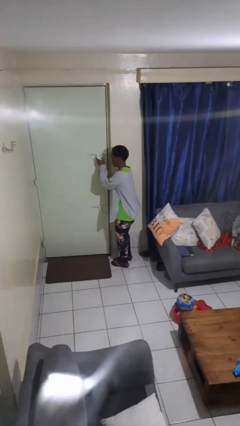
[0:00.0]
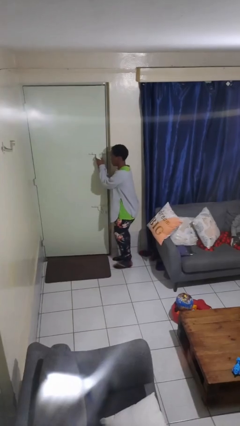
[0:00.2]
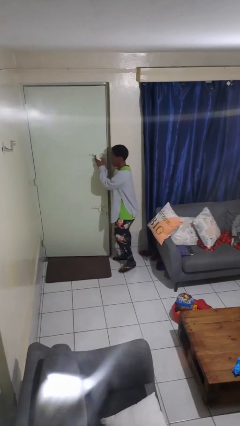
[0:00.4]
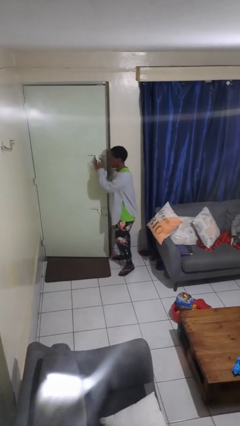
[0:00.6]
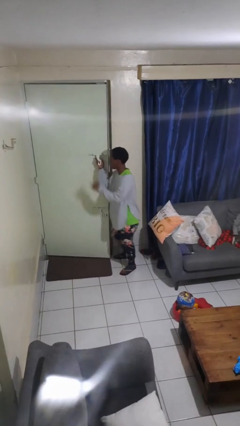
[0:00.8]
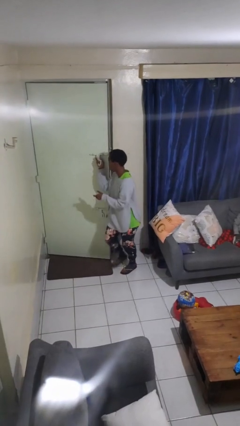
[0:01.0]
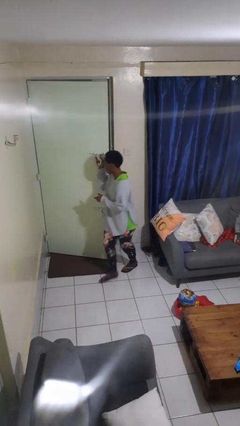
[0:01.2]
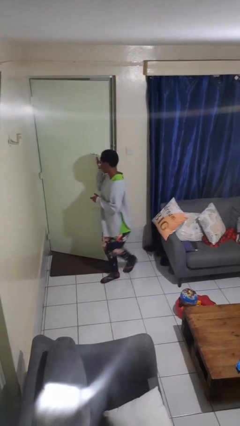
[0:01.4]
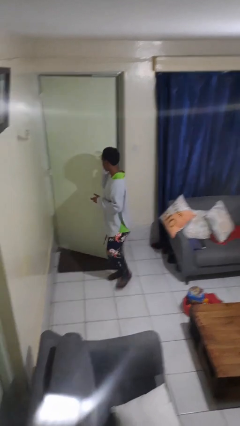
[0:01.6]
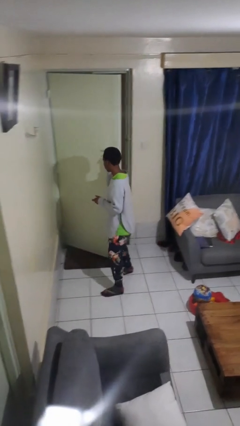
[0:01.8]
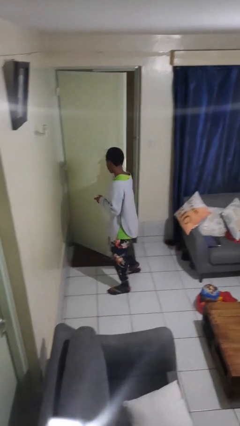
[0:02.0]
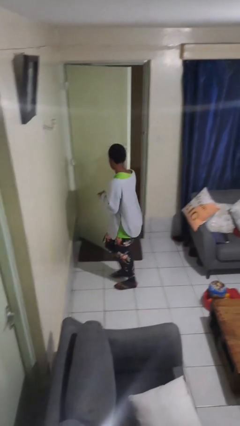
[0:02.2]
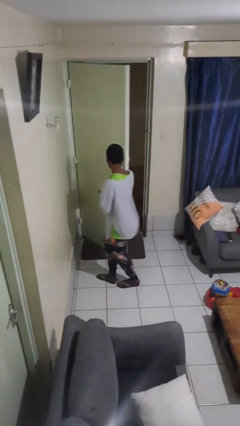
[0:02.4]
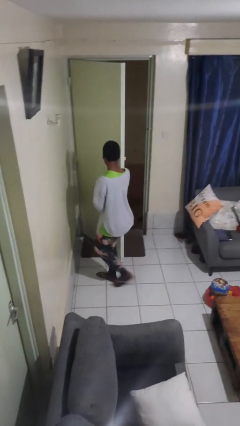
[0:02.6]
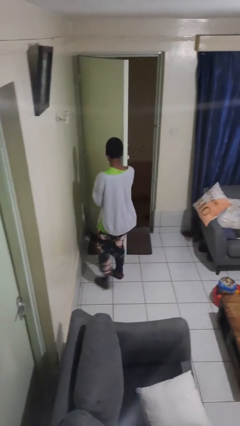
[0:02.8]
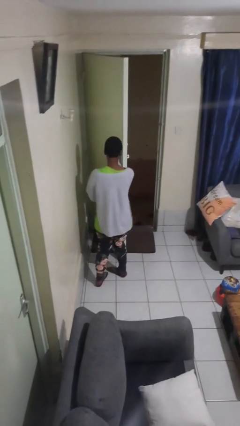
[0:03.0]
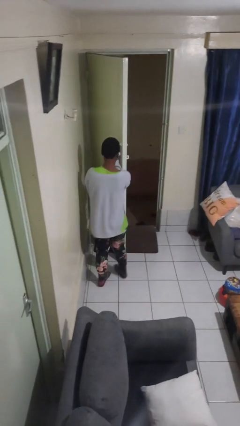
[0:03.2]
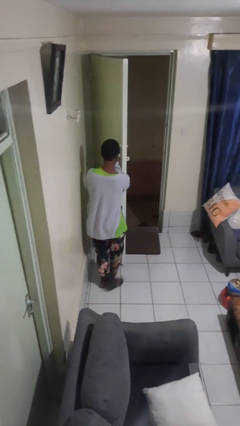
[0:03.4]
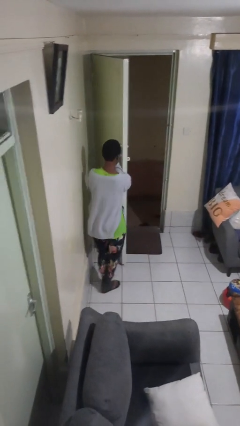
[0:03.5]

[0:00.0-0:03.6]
person opens facility door

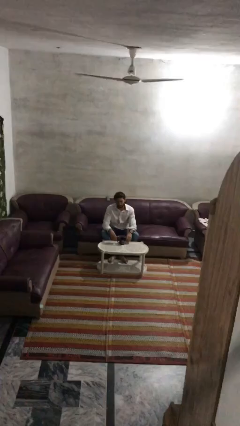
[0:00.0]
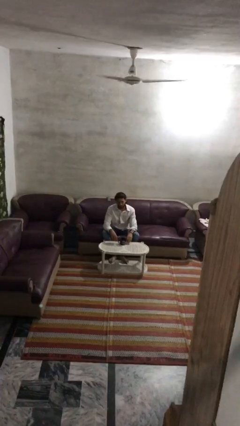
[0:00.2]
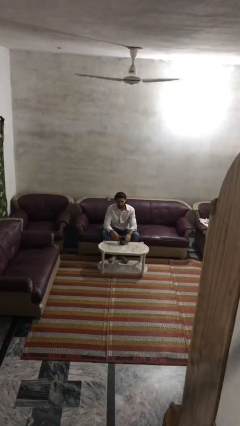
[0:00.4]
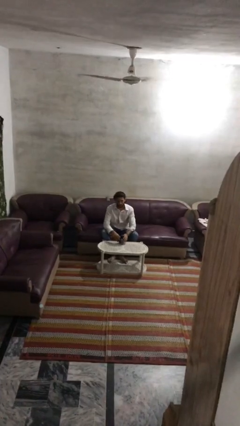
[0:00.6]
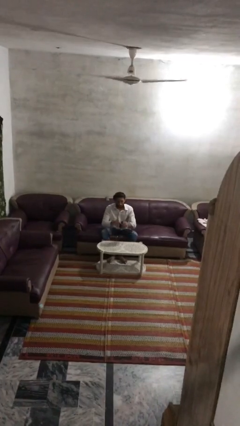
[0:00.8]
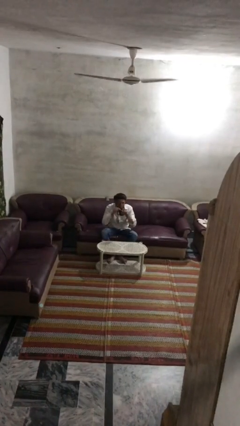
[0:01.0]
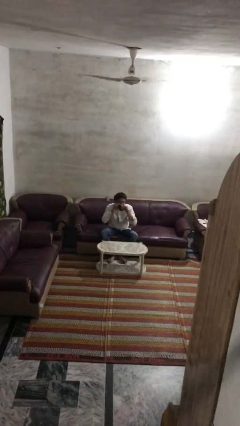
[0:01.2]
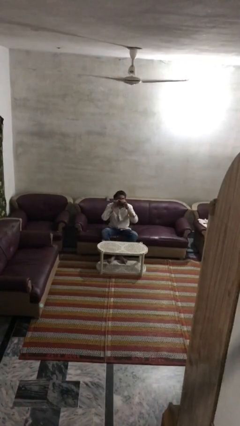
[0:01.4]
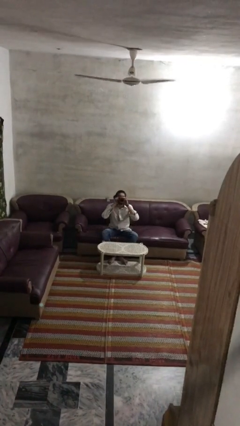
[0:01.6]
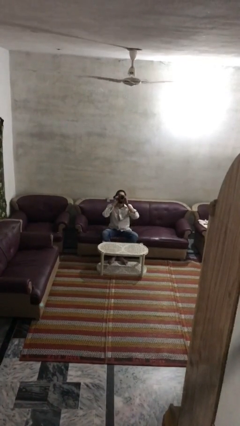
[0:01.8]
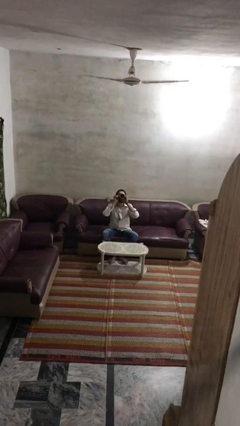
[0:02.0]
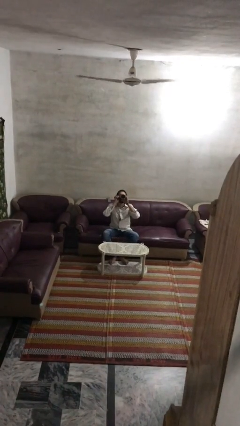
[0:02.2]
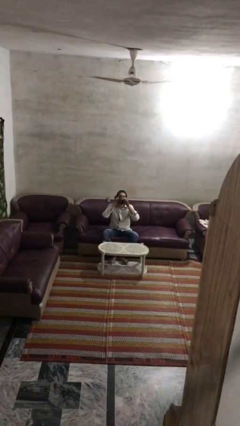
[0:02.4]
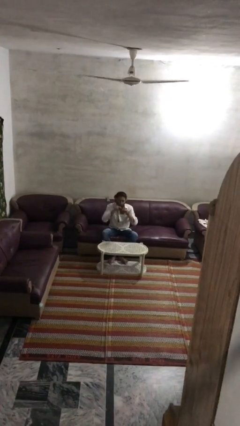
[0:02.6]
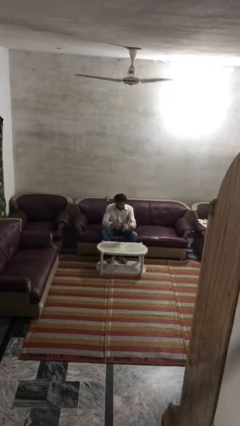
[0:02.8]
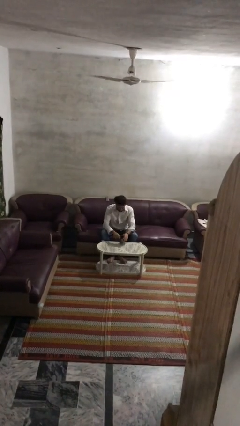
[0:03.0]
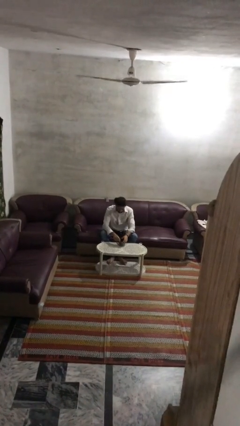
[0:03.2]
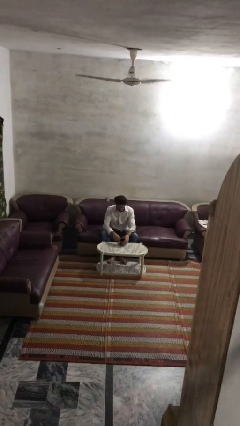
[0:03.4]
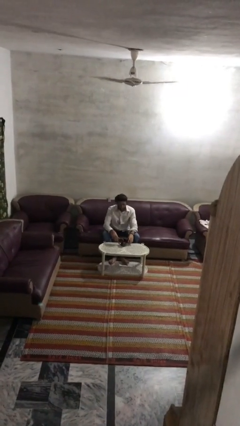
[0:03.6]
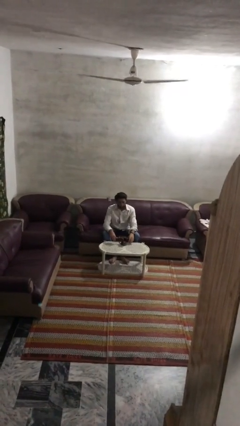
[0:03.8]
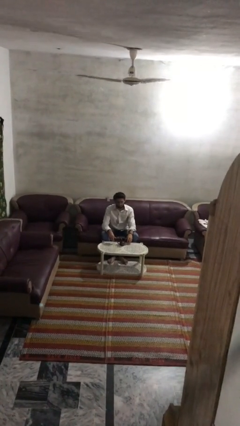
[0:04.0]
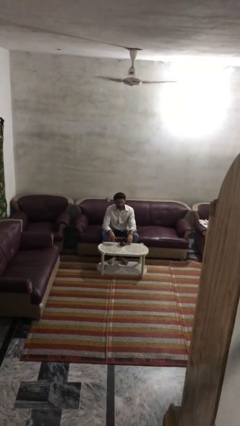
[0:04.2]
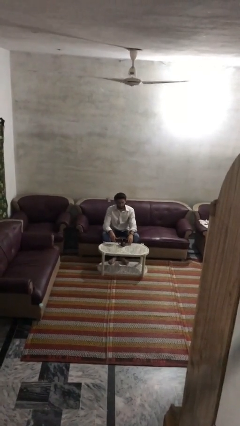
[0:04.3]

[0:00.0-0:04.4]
person drinks from mug

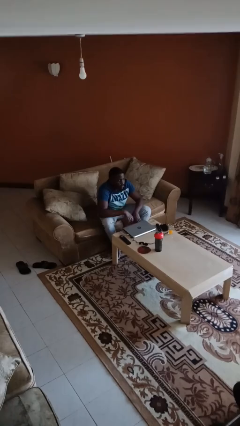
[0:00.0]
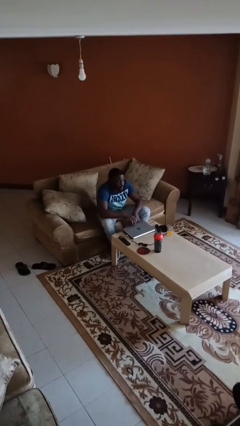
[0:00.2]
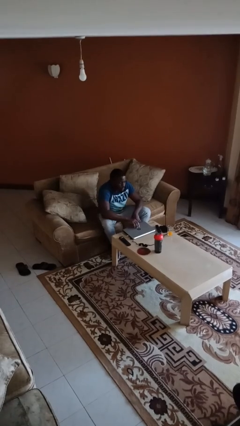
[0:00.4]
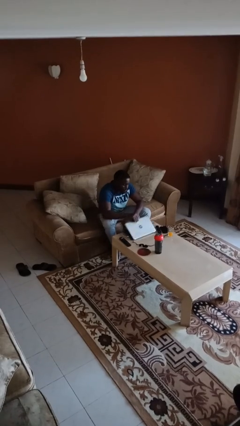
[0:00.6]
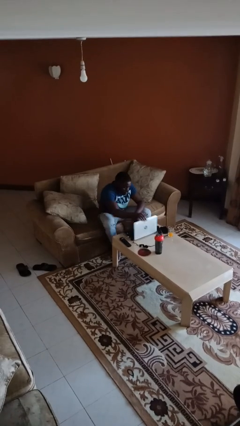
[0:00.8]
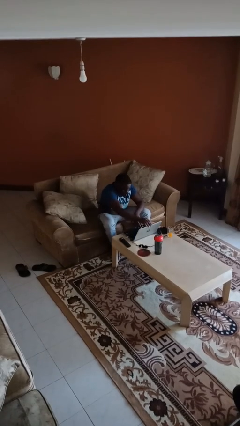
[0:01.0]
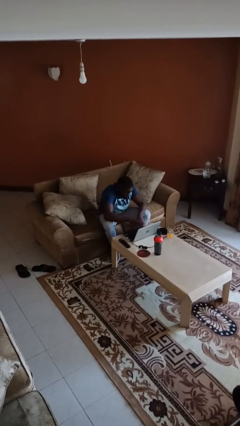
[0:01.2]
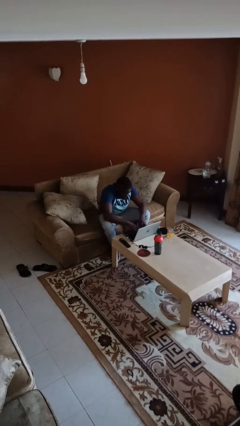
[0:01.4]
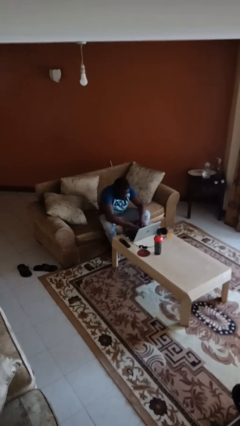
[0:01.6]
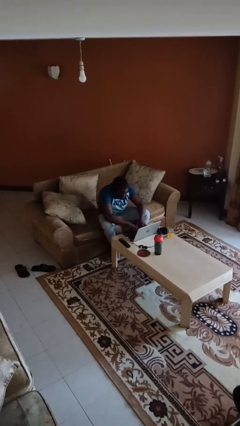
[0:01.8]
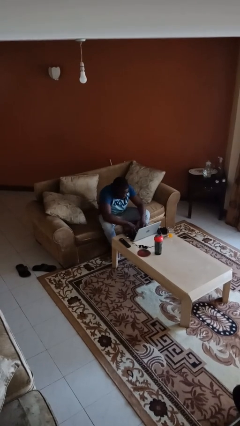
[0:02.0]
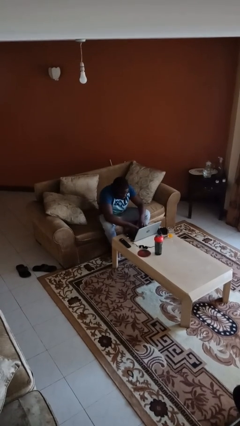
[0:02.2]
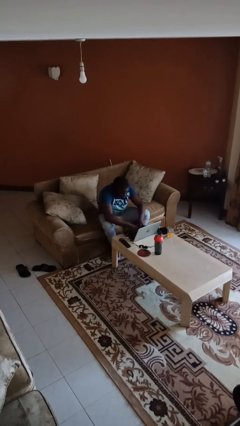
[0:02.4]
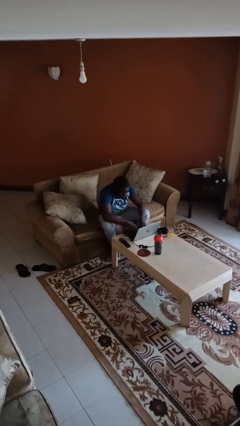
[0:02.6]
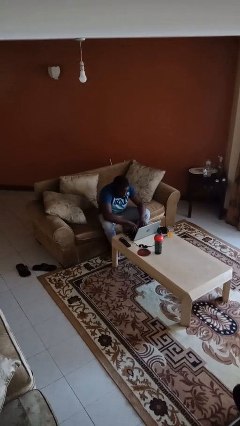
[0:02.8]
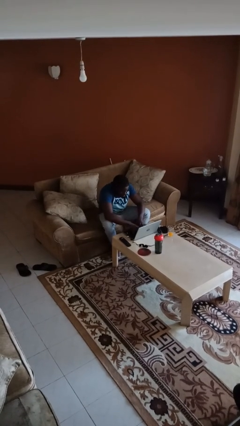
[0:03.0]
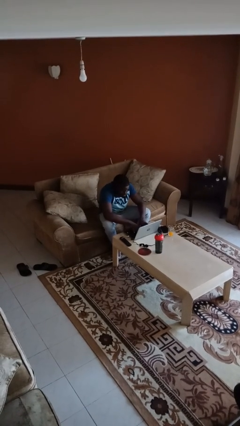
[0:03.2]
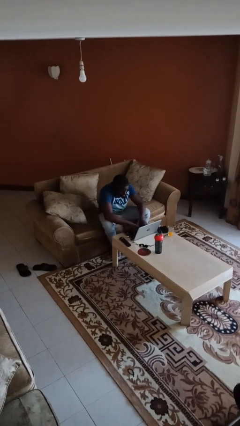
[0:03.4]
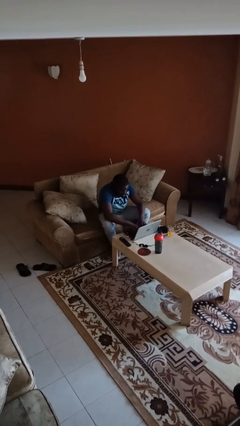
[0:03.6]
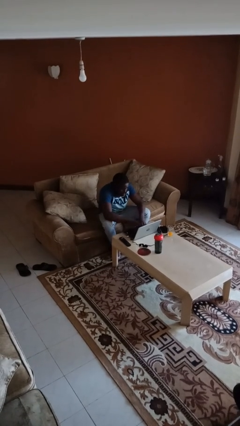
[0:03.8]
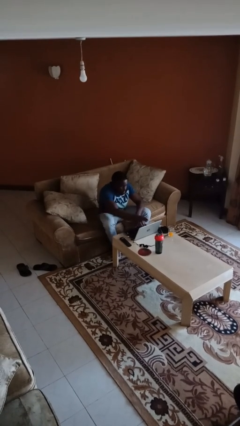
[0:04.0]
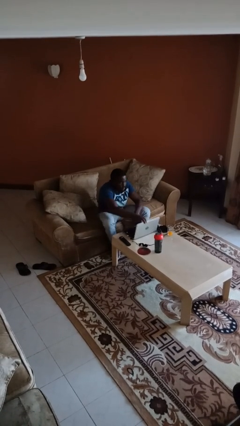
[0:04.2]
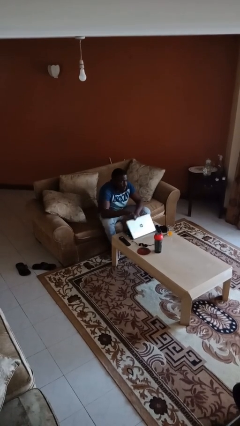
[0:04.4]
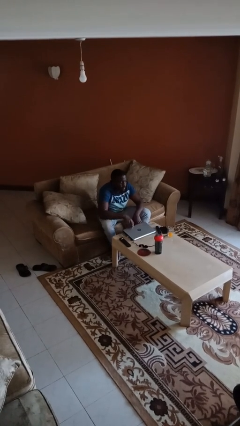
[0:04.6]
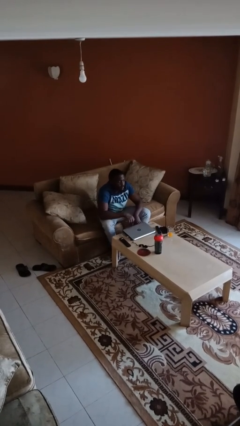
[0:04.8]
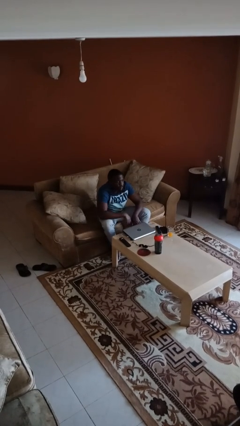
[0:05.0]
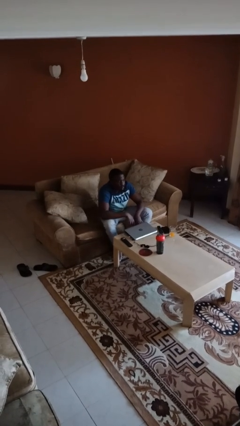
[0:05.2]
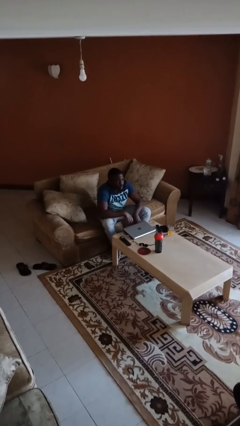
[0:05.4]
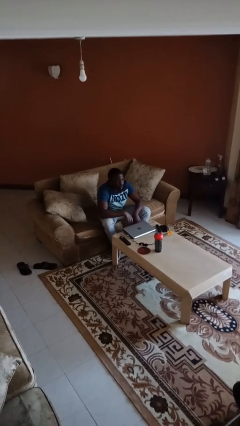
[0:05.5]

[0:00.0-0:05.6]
person interacts with laptop

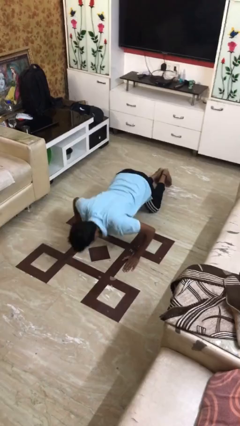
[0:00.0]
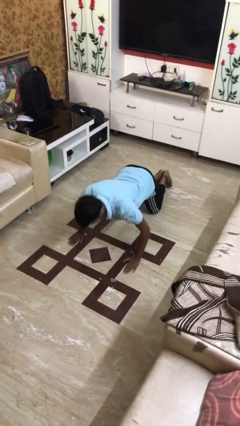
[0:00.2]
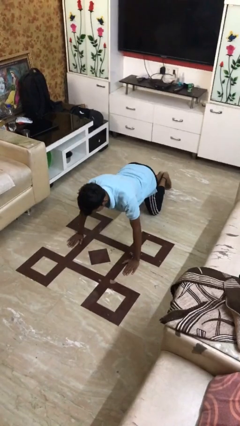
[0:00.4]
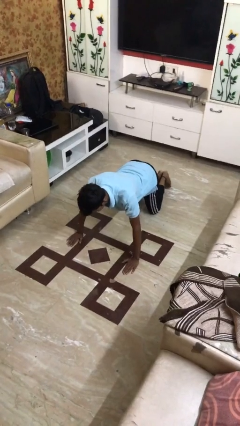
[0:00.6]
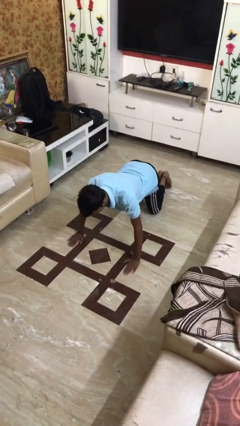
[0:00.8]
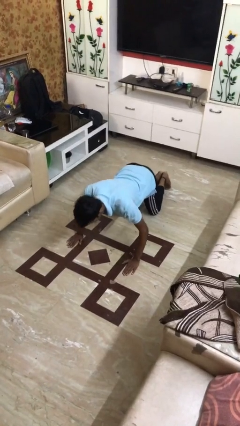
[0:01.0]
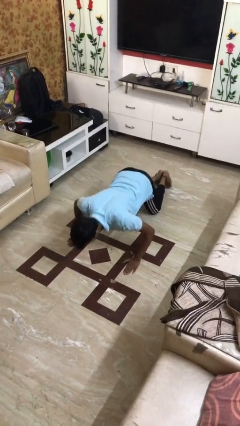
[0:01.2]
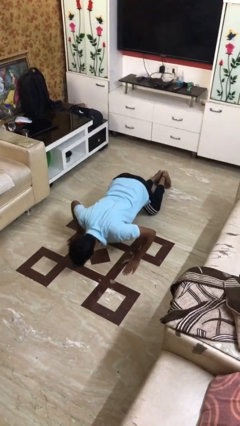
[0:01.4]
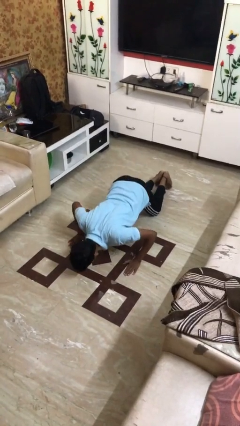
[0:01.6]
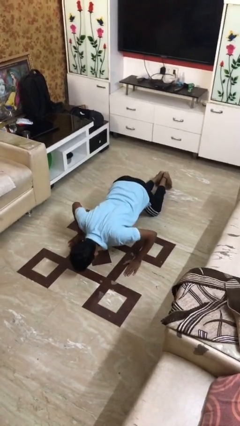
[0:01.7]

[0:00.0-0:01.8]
person exercises with pushup

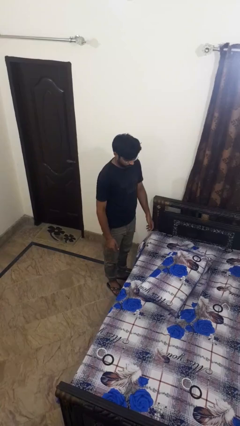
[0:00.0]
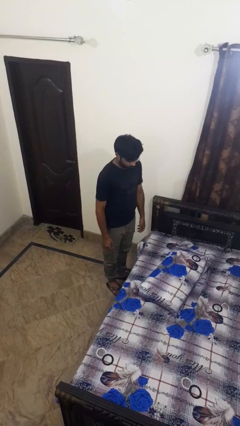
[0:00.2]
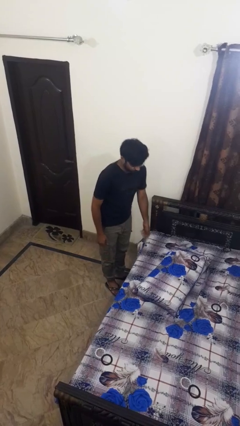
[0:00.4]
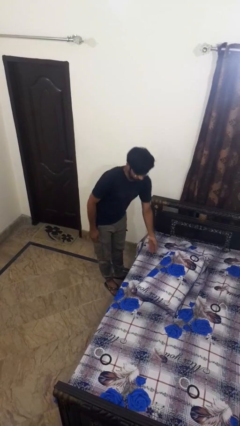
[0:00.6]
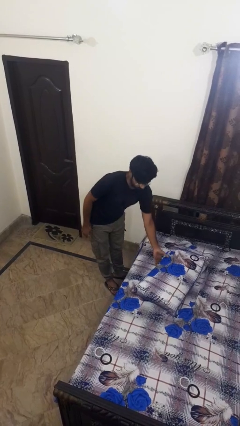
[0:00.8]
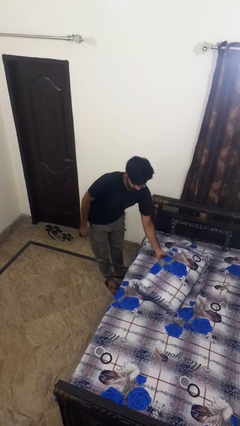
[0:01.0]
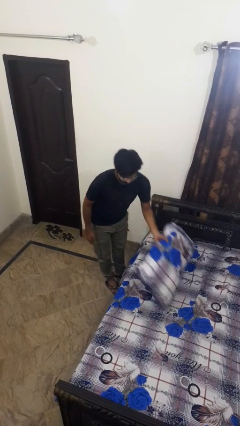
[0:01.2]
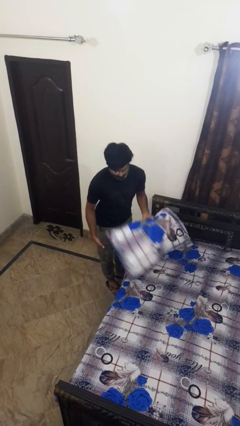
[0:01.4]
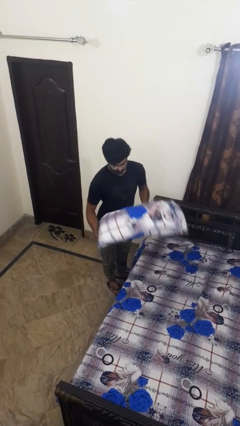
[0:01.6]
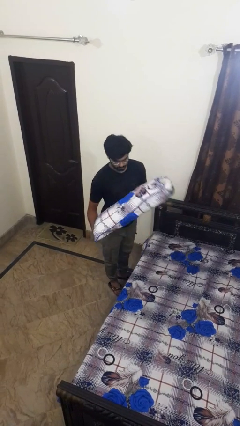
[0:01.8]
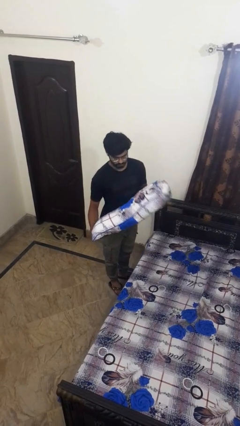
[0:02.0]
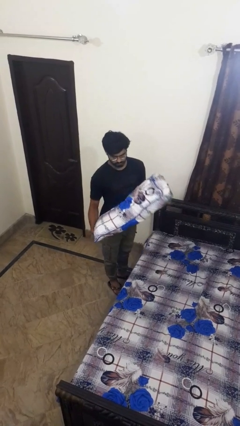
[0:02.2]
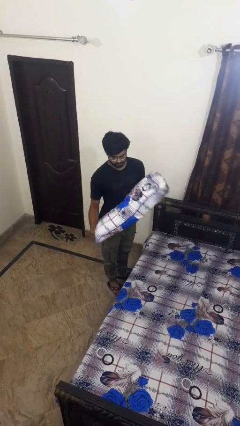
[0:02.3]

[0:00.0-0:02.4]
person picks up object from bed
